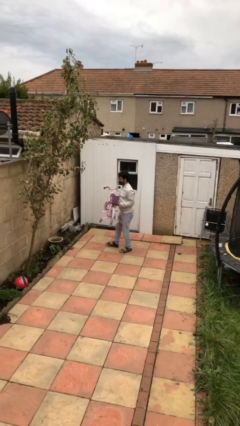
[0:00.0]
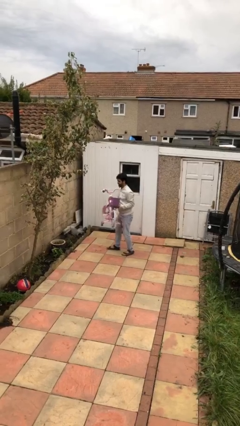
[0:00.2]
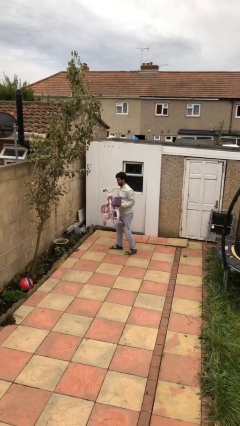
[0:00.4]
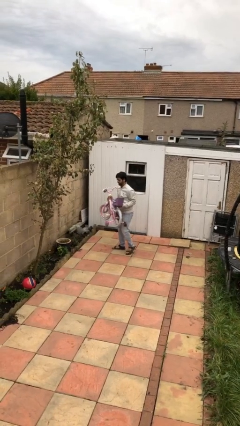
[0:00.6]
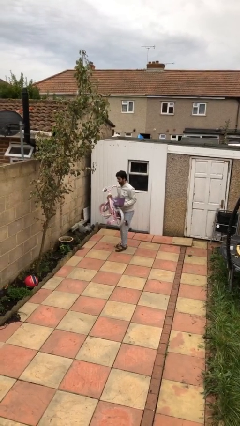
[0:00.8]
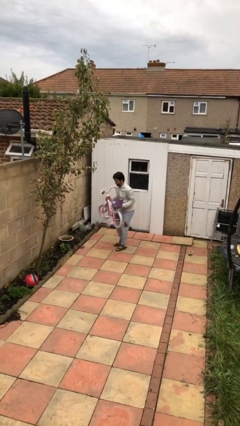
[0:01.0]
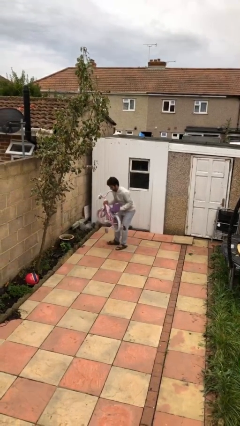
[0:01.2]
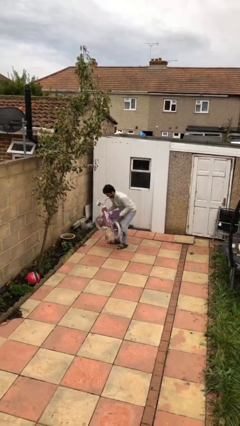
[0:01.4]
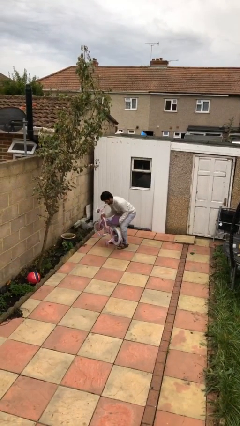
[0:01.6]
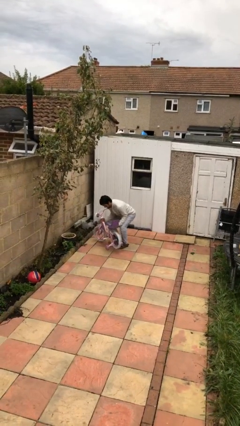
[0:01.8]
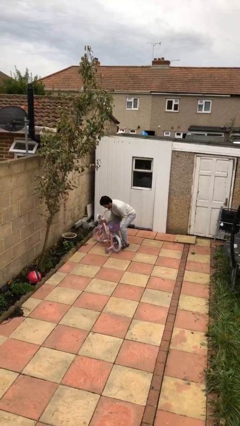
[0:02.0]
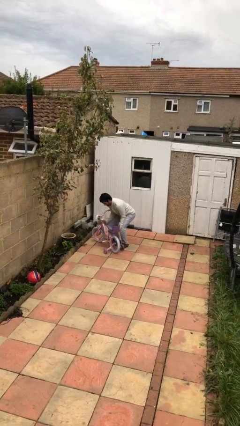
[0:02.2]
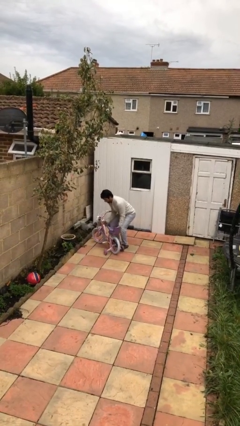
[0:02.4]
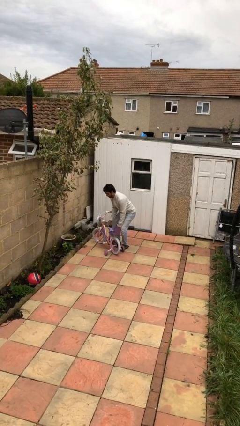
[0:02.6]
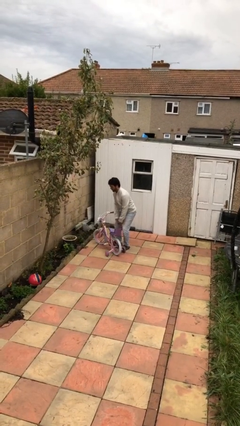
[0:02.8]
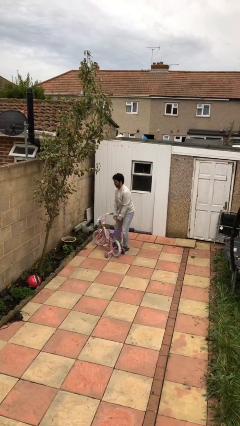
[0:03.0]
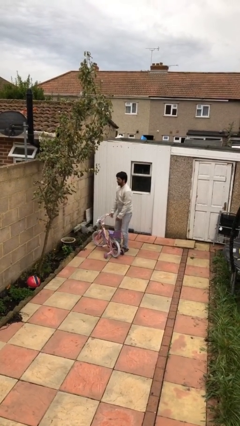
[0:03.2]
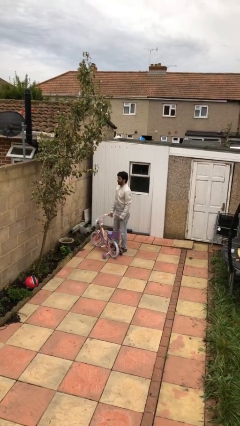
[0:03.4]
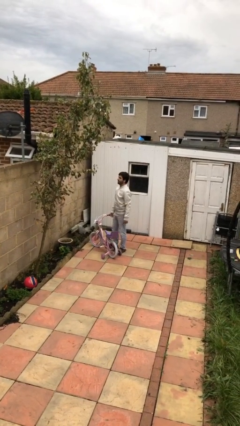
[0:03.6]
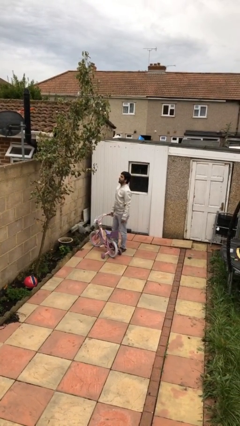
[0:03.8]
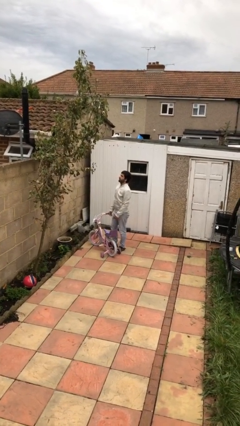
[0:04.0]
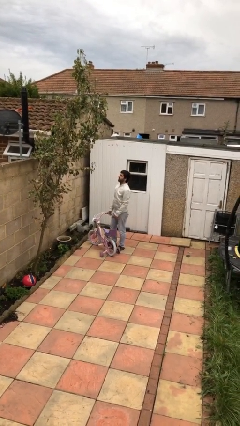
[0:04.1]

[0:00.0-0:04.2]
person puts down object on floor

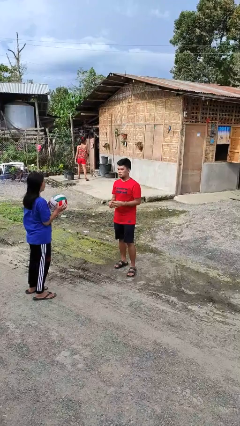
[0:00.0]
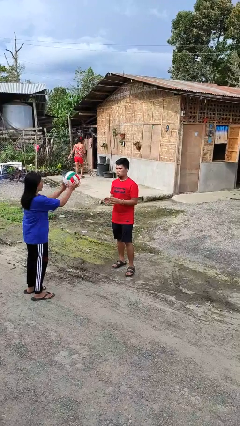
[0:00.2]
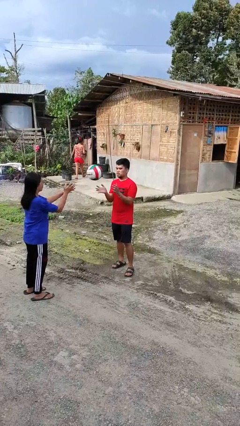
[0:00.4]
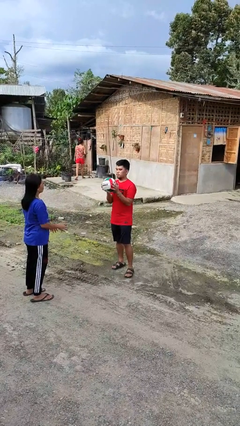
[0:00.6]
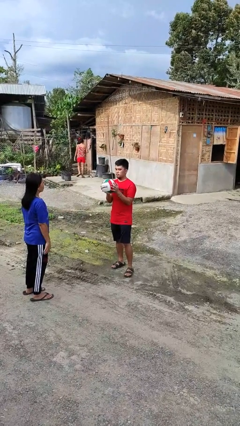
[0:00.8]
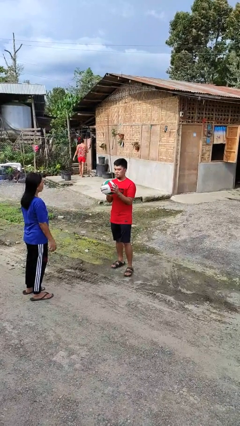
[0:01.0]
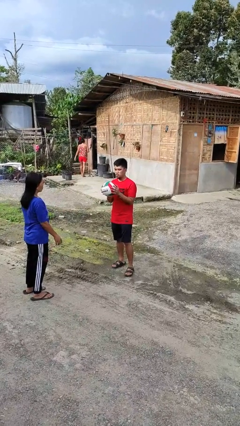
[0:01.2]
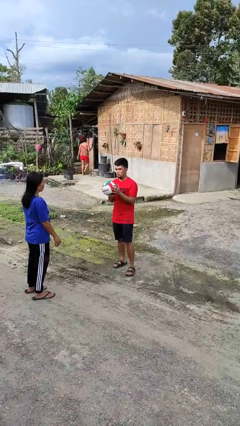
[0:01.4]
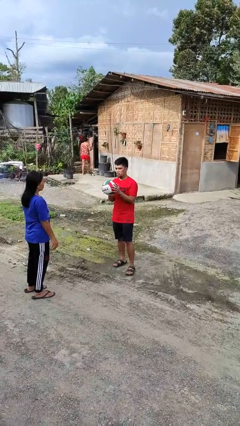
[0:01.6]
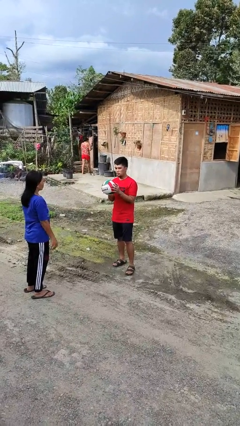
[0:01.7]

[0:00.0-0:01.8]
person catches object from person

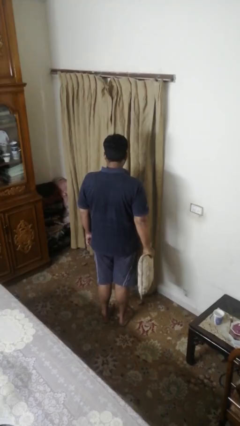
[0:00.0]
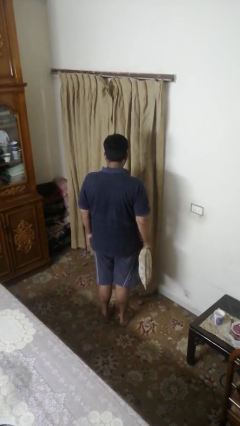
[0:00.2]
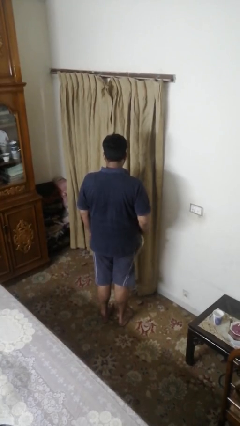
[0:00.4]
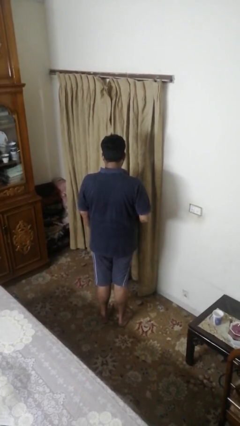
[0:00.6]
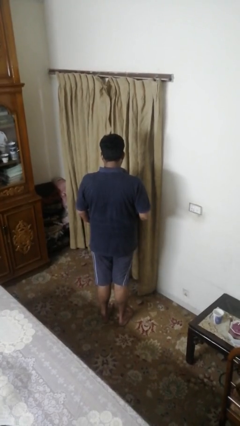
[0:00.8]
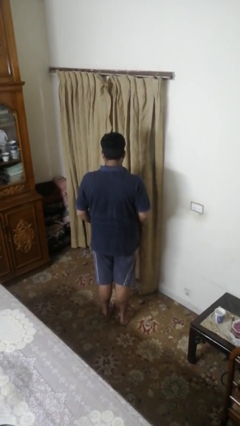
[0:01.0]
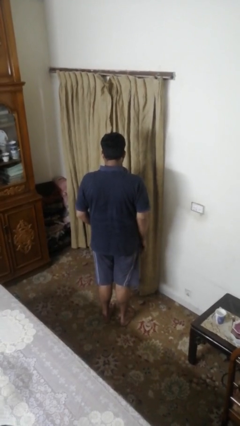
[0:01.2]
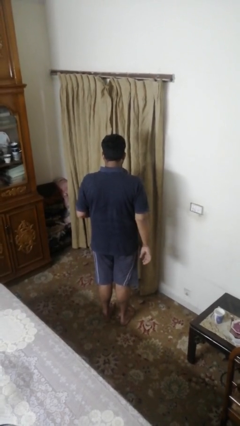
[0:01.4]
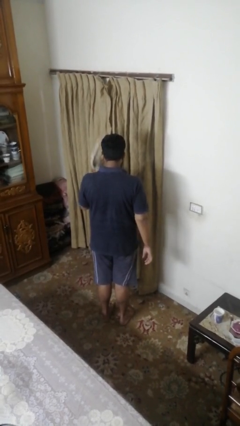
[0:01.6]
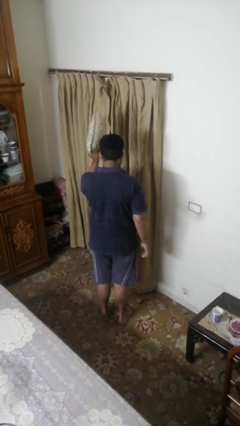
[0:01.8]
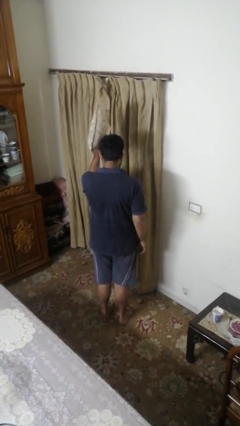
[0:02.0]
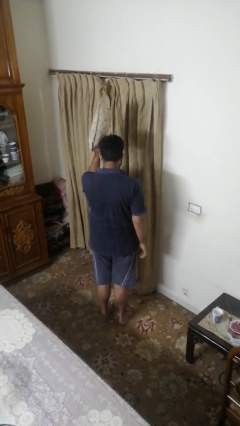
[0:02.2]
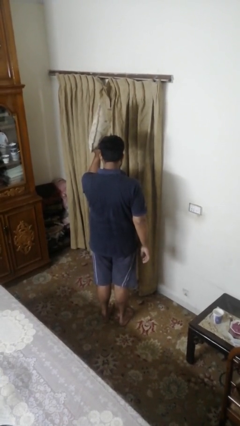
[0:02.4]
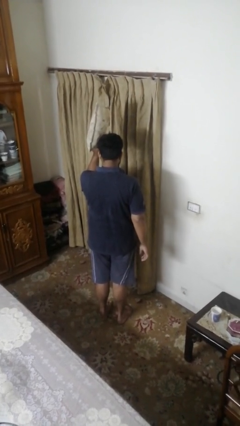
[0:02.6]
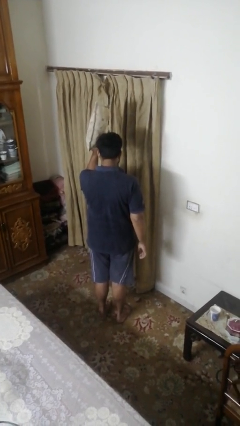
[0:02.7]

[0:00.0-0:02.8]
person holds object above head

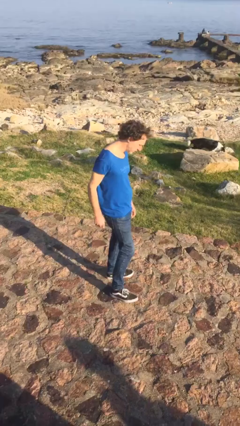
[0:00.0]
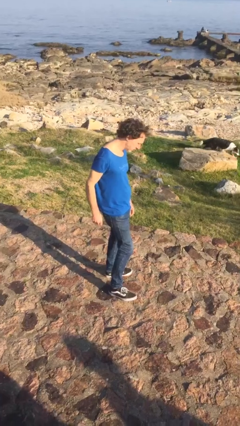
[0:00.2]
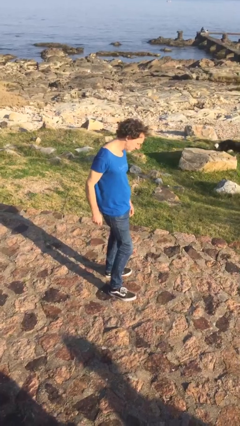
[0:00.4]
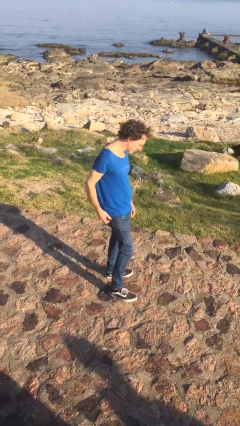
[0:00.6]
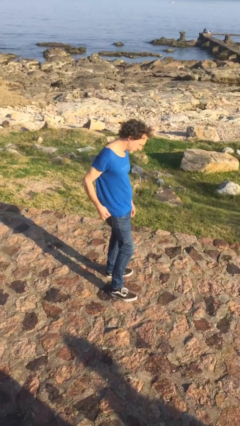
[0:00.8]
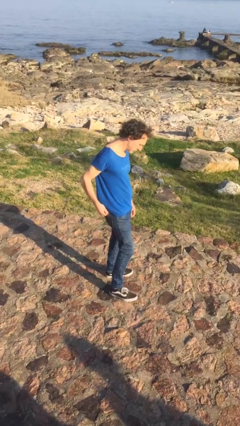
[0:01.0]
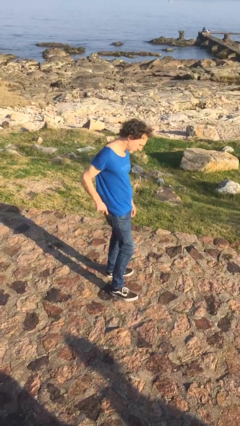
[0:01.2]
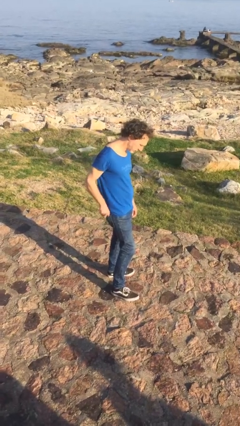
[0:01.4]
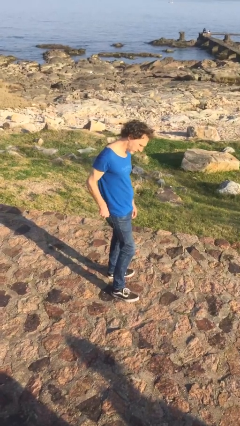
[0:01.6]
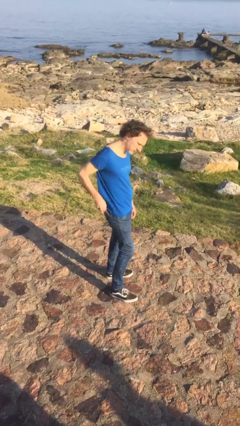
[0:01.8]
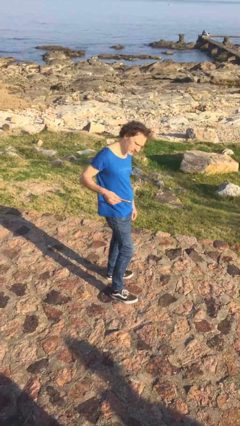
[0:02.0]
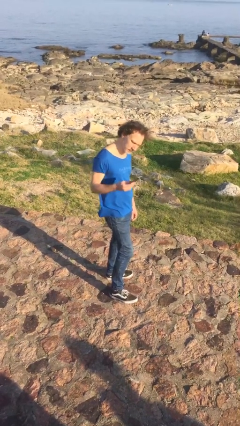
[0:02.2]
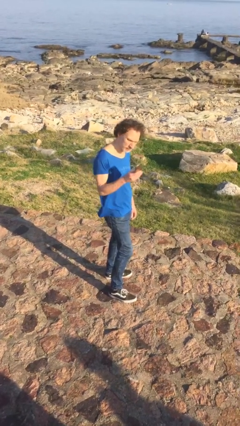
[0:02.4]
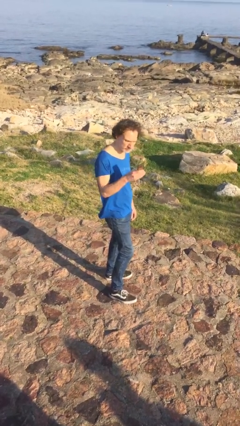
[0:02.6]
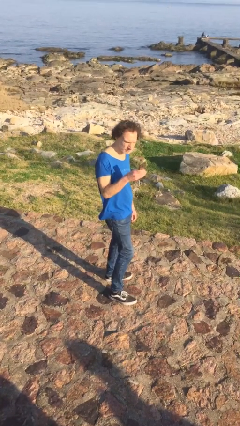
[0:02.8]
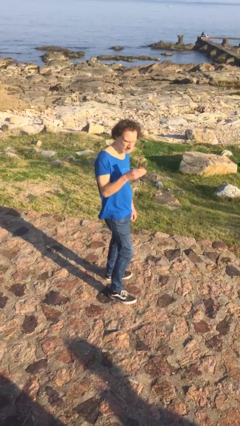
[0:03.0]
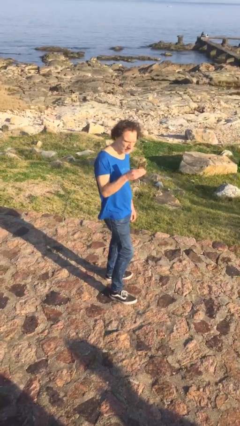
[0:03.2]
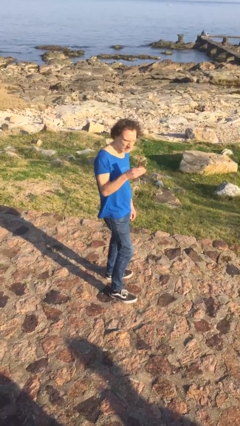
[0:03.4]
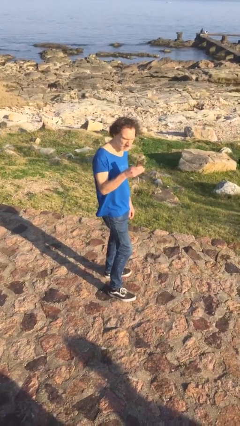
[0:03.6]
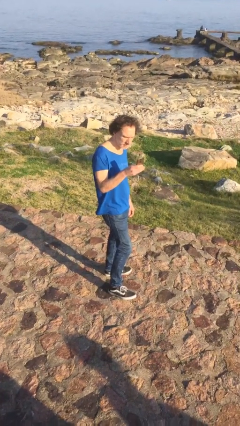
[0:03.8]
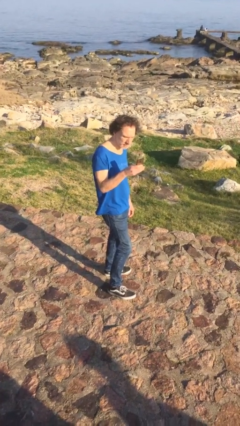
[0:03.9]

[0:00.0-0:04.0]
person takes phone from pocket

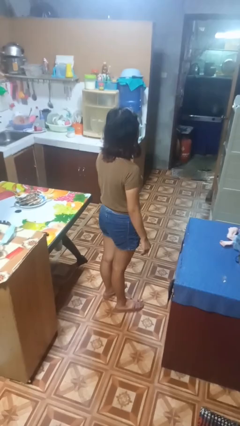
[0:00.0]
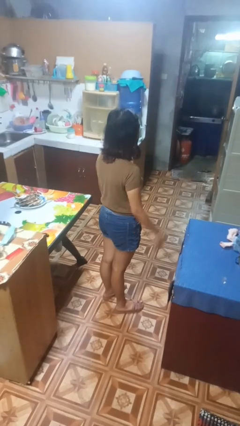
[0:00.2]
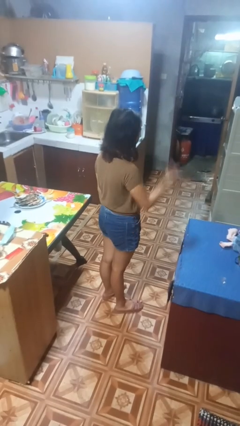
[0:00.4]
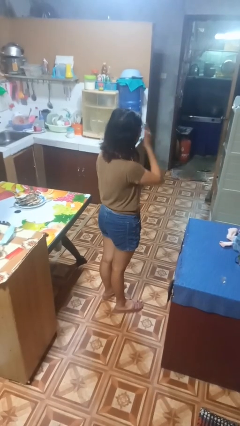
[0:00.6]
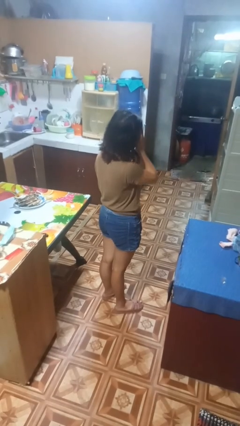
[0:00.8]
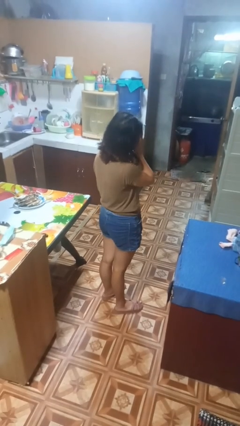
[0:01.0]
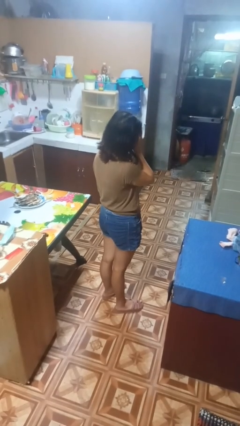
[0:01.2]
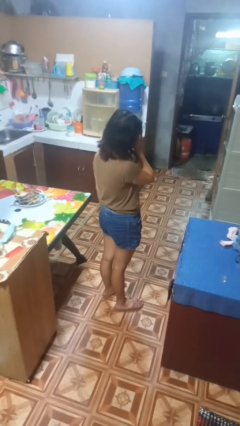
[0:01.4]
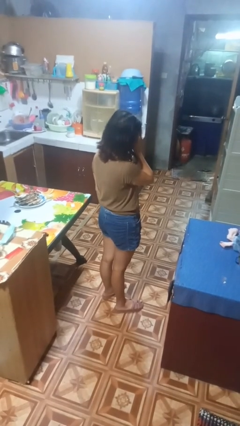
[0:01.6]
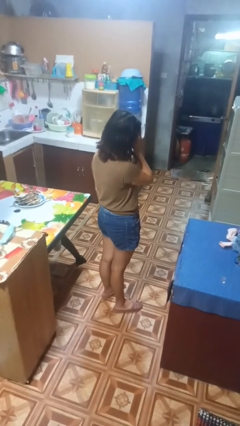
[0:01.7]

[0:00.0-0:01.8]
person covers face with hands

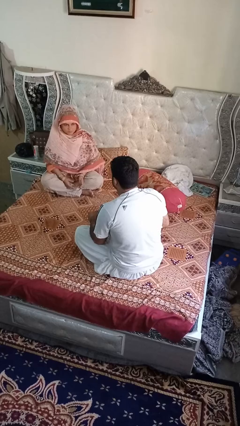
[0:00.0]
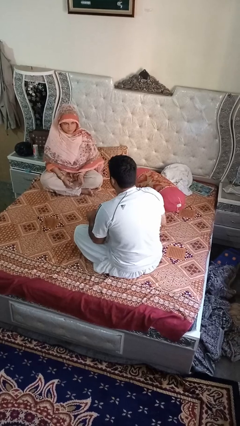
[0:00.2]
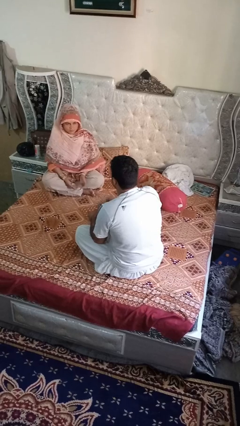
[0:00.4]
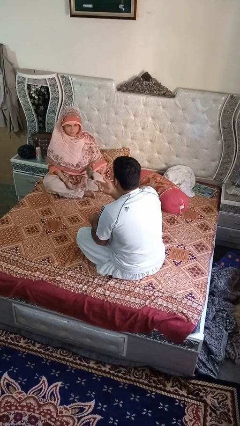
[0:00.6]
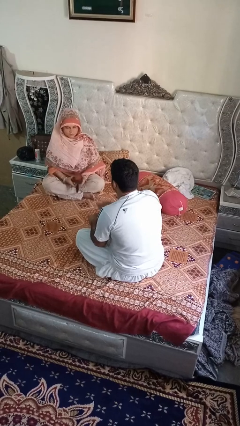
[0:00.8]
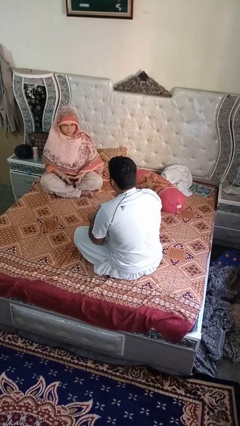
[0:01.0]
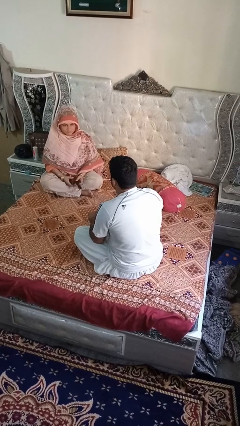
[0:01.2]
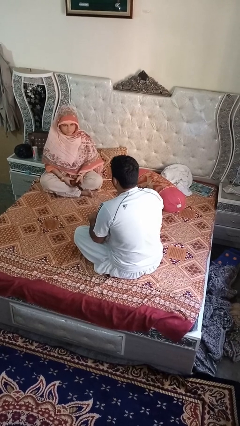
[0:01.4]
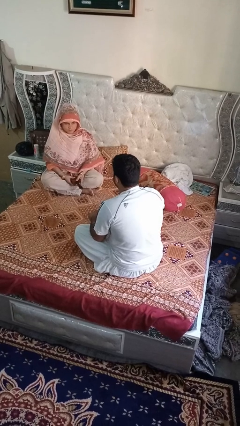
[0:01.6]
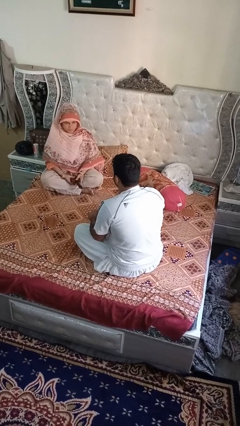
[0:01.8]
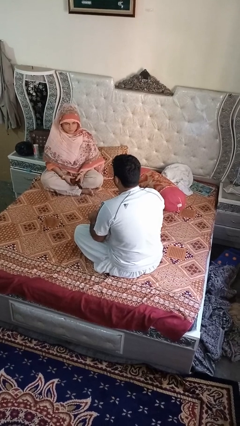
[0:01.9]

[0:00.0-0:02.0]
person throws object to person

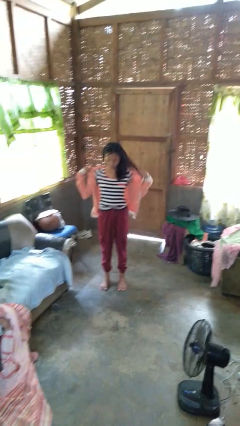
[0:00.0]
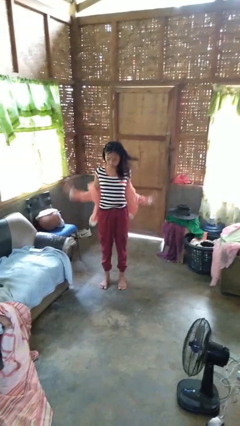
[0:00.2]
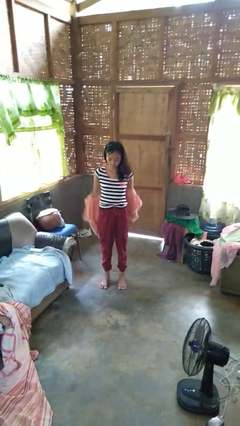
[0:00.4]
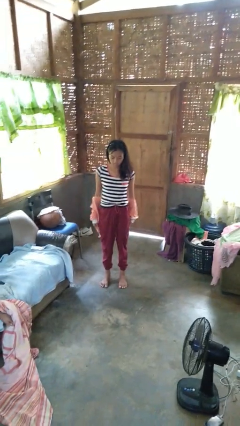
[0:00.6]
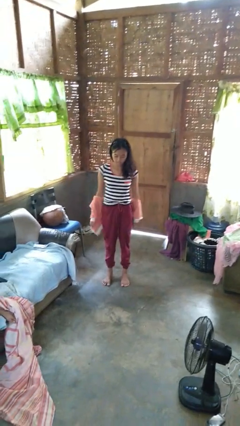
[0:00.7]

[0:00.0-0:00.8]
person takes off jacket
